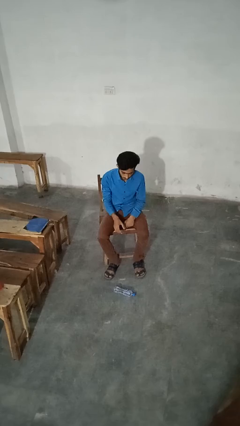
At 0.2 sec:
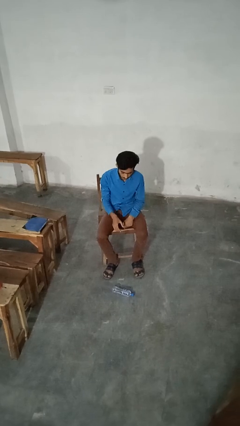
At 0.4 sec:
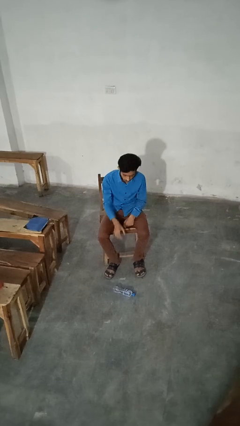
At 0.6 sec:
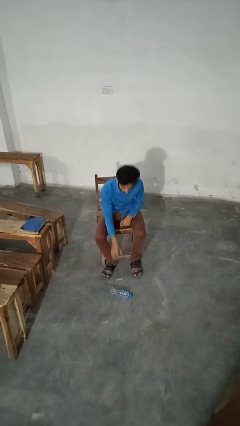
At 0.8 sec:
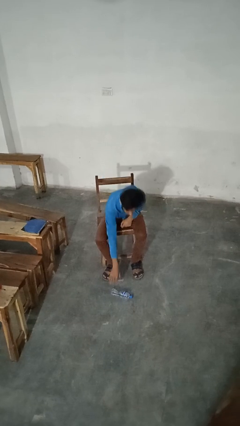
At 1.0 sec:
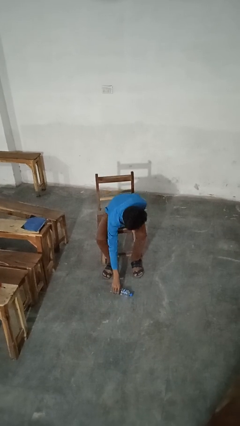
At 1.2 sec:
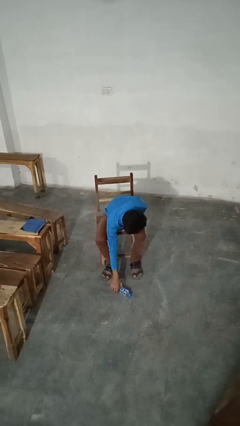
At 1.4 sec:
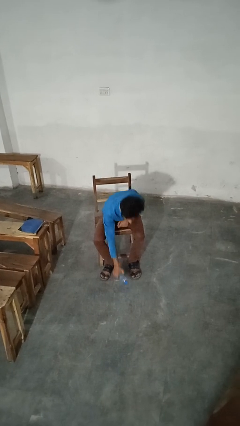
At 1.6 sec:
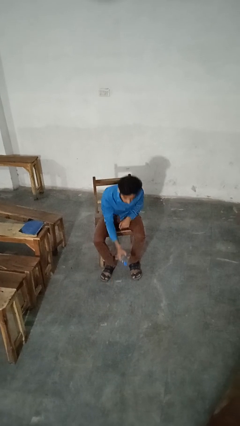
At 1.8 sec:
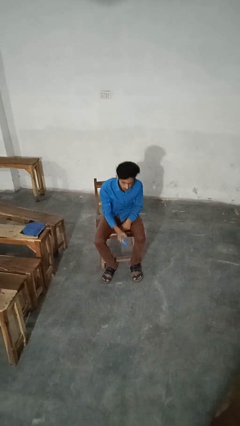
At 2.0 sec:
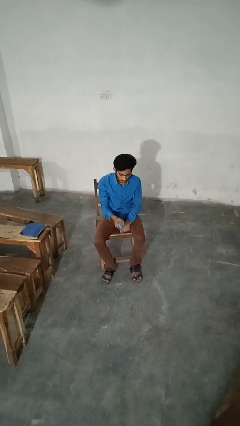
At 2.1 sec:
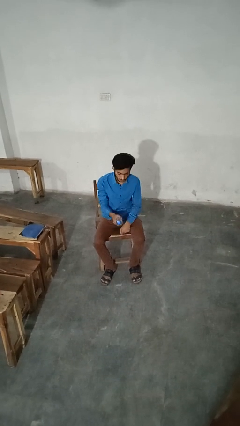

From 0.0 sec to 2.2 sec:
person picks up object from floor

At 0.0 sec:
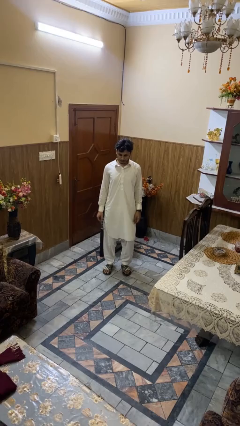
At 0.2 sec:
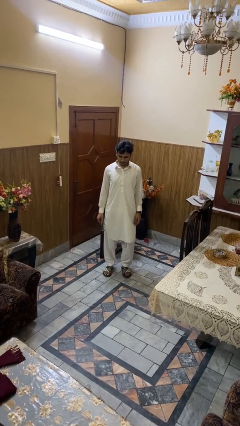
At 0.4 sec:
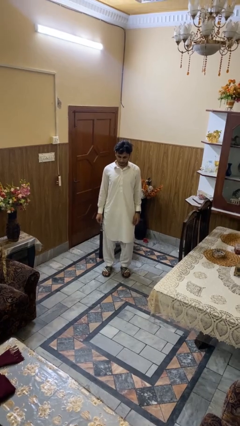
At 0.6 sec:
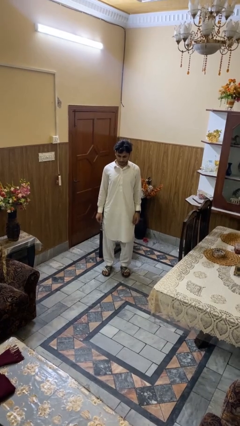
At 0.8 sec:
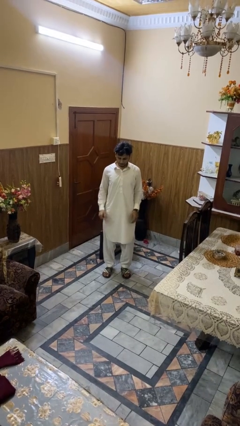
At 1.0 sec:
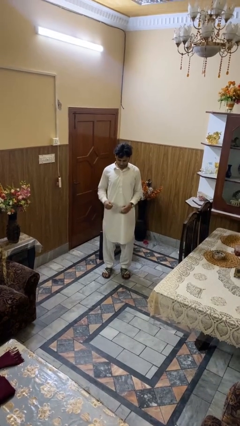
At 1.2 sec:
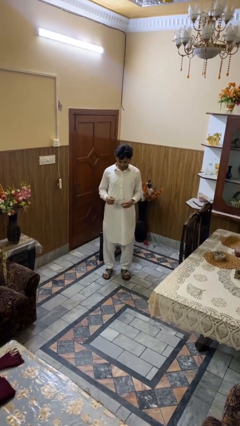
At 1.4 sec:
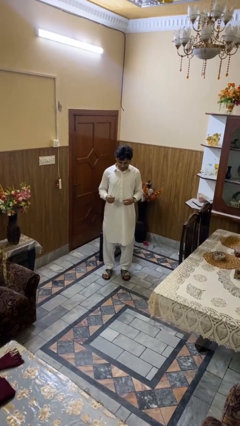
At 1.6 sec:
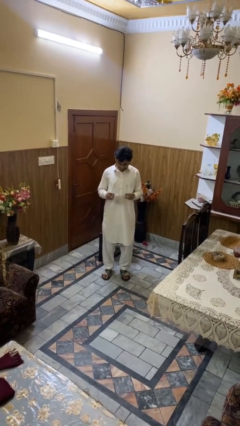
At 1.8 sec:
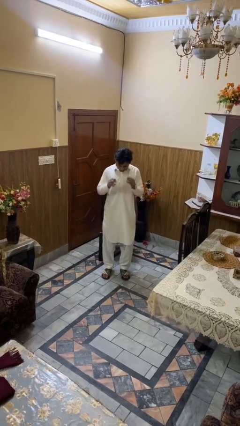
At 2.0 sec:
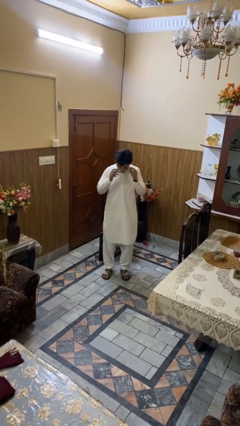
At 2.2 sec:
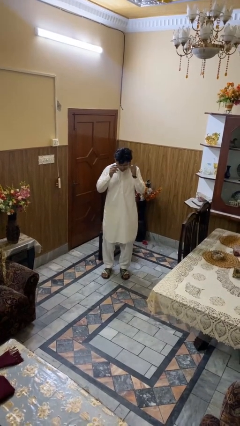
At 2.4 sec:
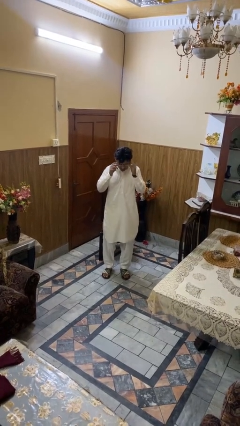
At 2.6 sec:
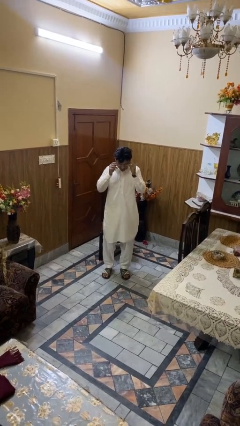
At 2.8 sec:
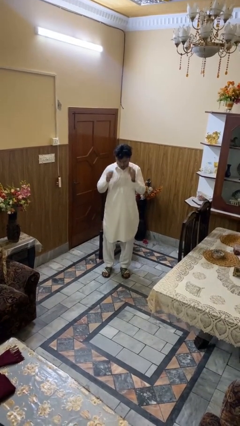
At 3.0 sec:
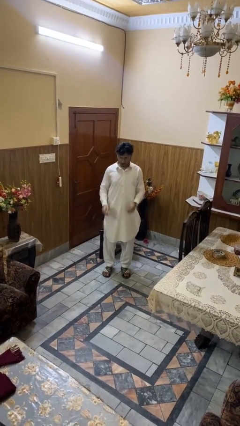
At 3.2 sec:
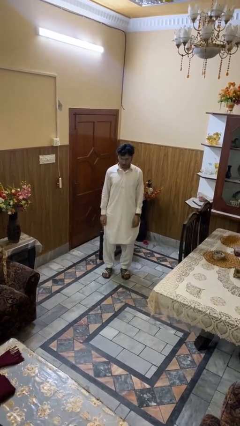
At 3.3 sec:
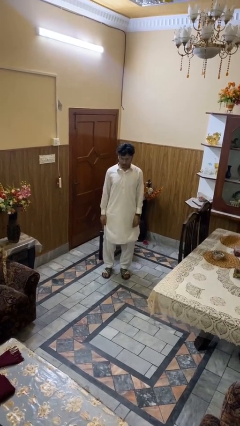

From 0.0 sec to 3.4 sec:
person puts on glasses

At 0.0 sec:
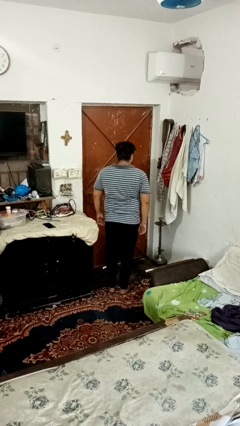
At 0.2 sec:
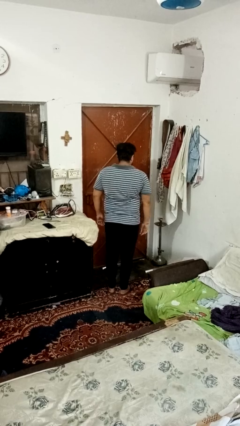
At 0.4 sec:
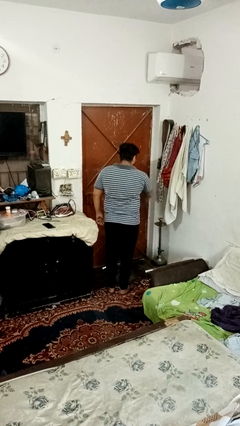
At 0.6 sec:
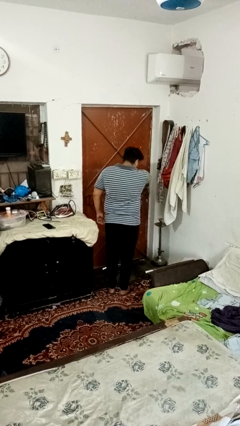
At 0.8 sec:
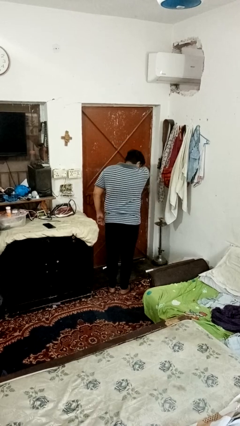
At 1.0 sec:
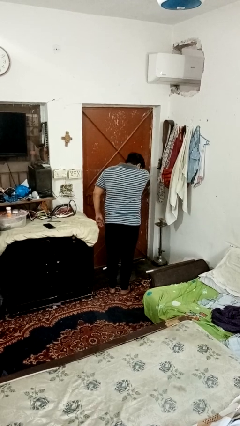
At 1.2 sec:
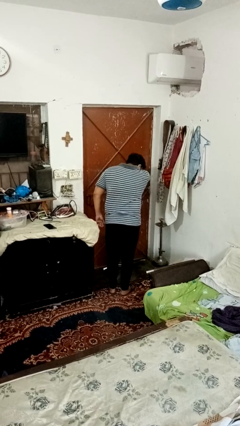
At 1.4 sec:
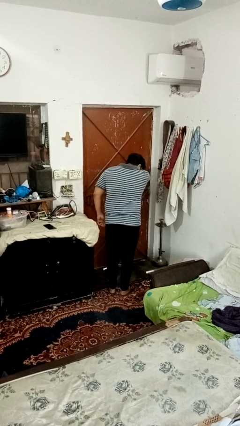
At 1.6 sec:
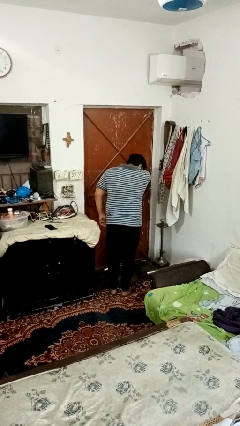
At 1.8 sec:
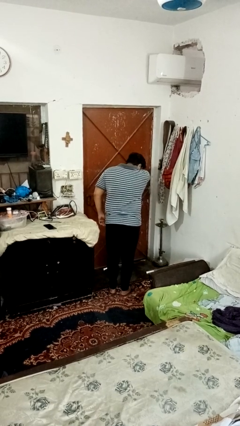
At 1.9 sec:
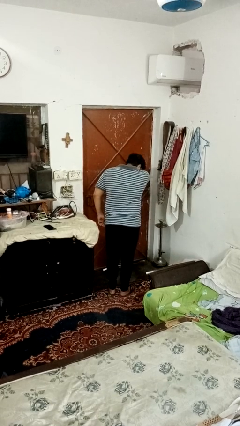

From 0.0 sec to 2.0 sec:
person sneezes into arm

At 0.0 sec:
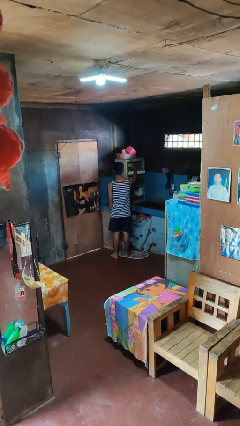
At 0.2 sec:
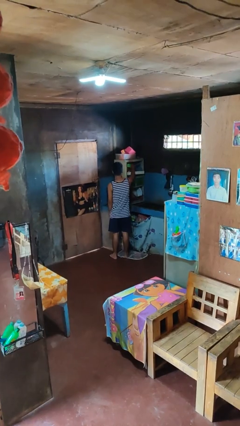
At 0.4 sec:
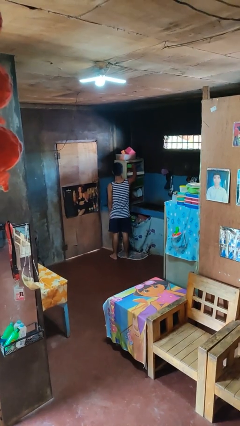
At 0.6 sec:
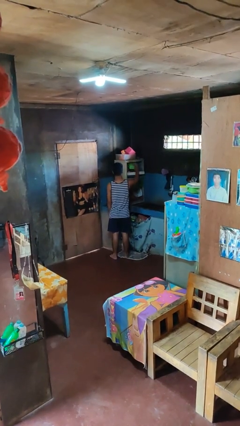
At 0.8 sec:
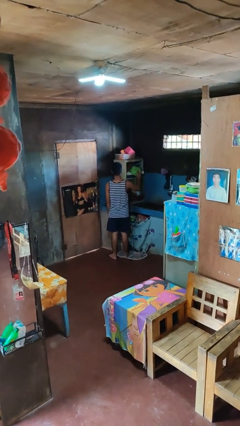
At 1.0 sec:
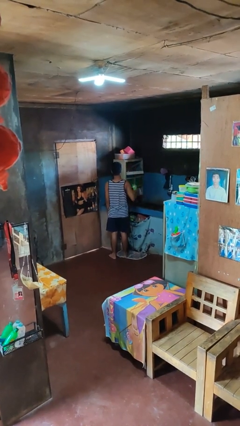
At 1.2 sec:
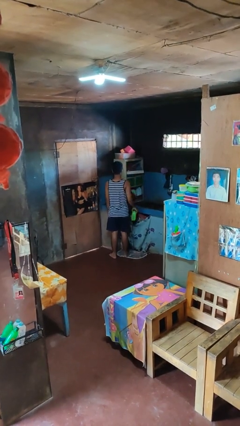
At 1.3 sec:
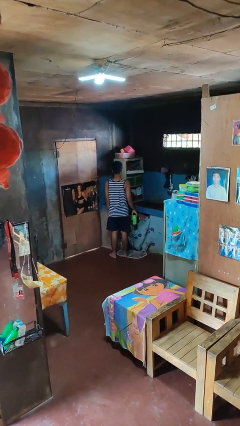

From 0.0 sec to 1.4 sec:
person takes object from cabinet

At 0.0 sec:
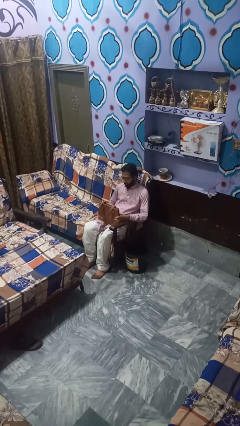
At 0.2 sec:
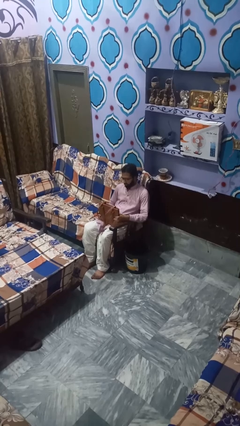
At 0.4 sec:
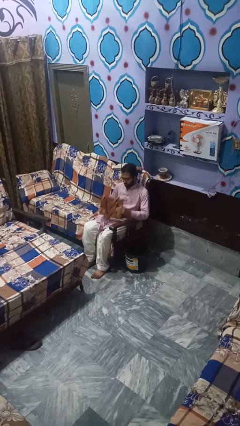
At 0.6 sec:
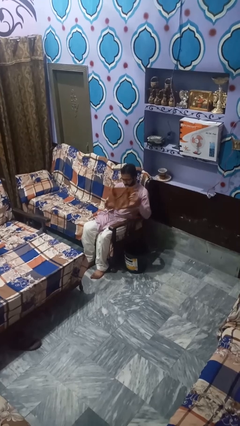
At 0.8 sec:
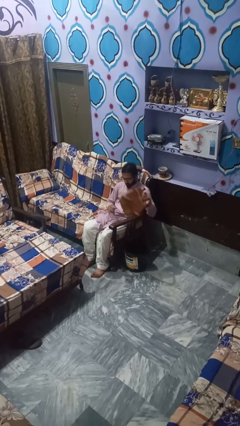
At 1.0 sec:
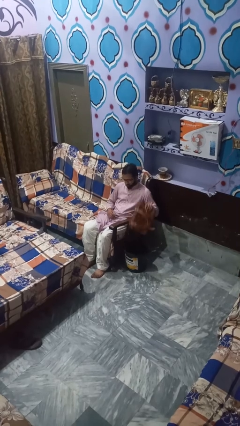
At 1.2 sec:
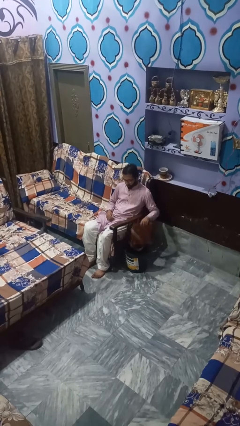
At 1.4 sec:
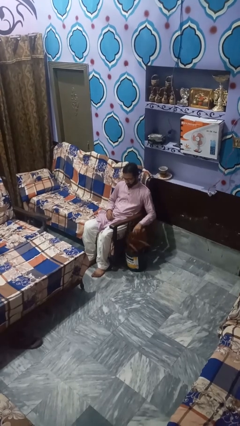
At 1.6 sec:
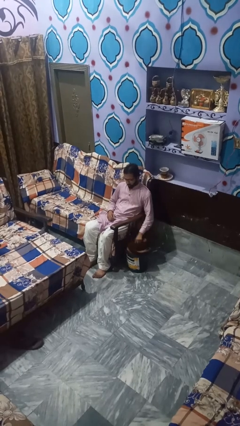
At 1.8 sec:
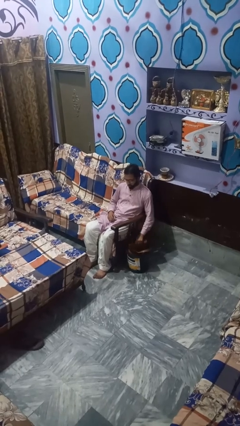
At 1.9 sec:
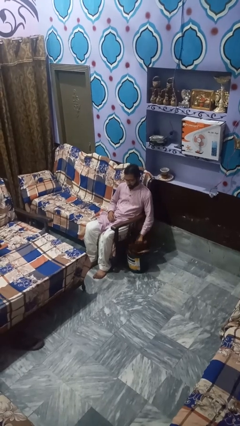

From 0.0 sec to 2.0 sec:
person puts object into basket

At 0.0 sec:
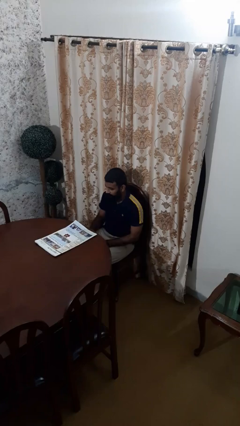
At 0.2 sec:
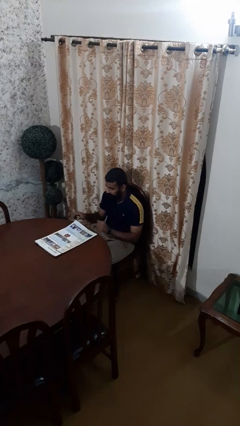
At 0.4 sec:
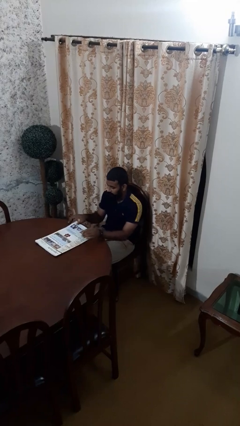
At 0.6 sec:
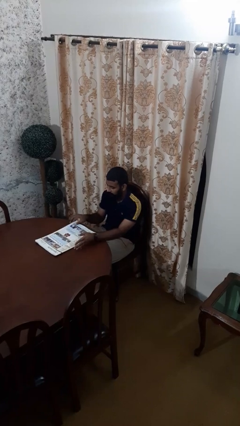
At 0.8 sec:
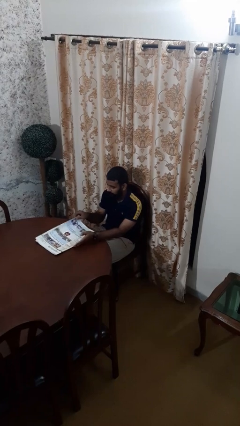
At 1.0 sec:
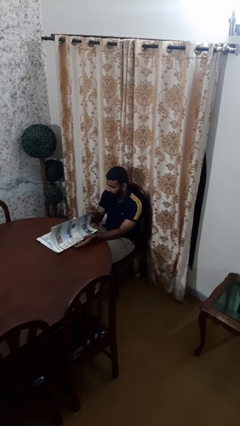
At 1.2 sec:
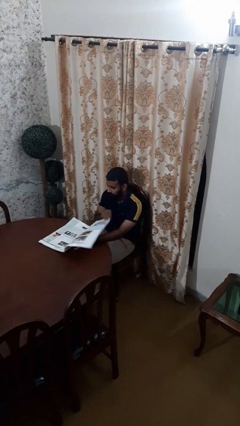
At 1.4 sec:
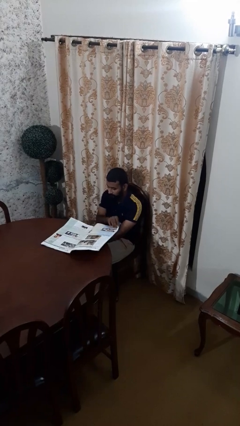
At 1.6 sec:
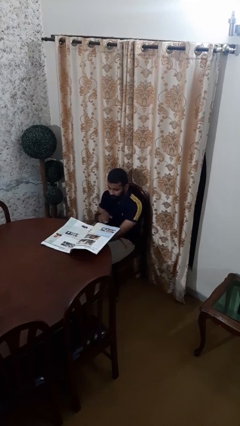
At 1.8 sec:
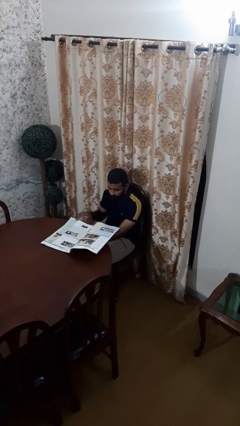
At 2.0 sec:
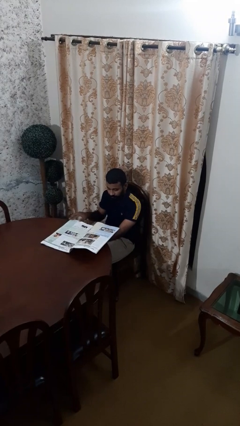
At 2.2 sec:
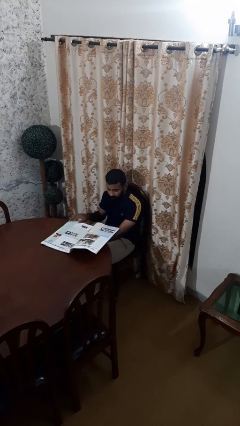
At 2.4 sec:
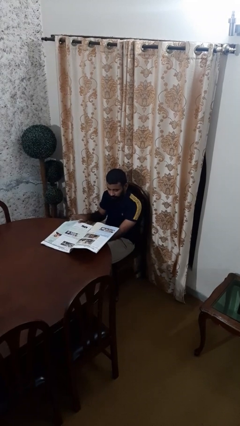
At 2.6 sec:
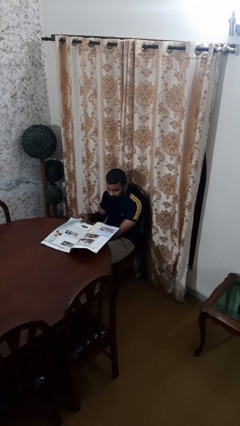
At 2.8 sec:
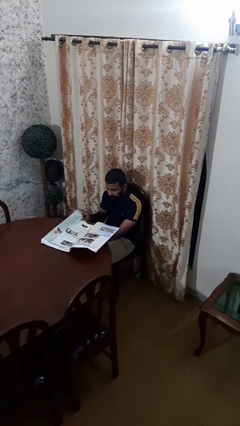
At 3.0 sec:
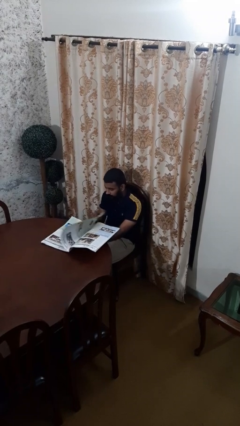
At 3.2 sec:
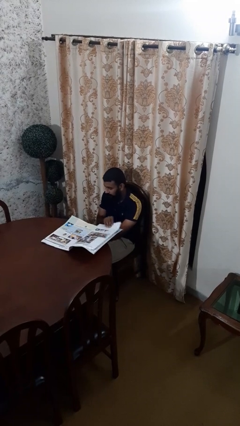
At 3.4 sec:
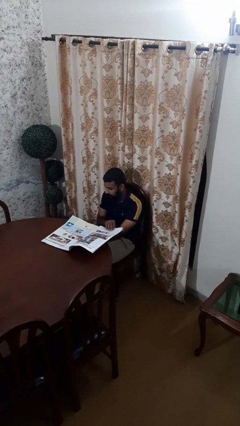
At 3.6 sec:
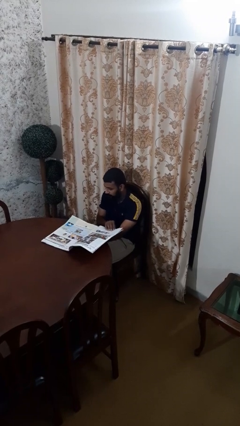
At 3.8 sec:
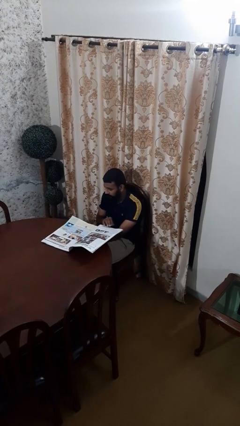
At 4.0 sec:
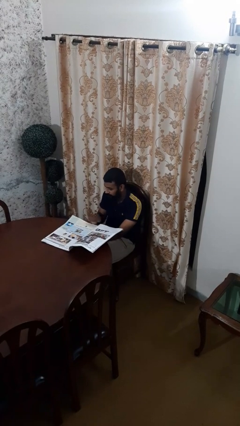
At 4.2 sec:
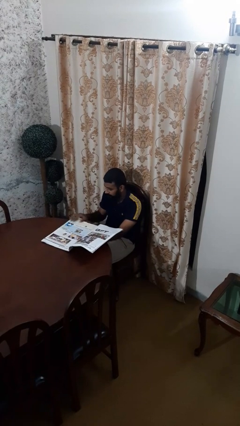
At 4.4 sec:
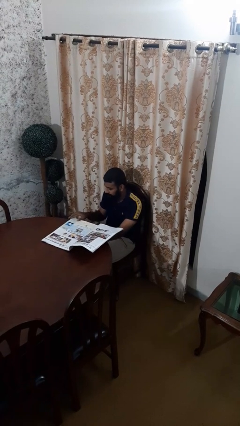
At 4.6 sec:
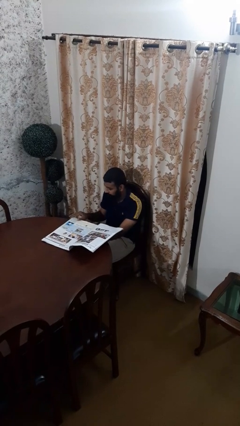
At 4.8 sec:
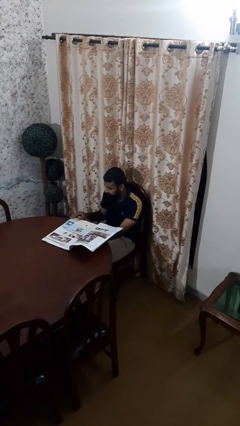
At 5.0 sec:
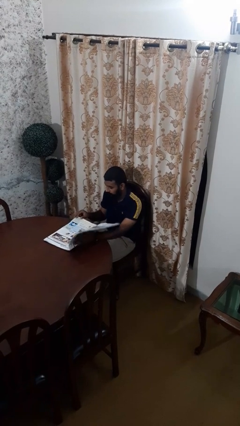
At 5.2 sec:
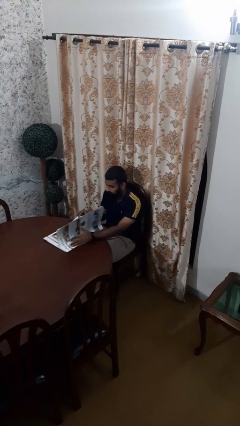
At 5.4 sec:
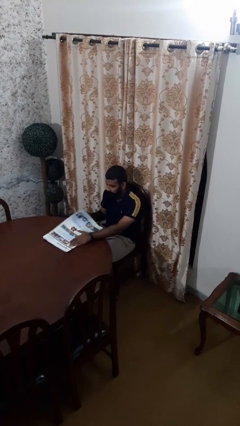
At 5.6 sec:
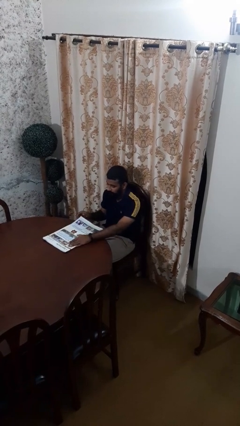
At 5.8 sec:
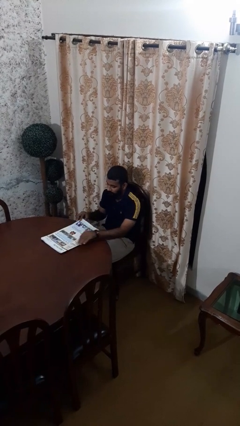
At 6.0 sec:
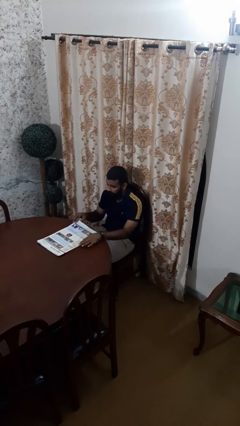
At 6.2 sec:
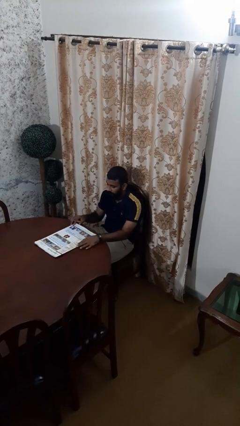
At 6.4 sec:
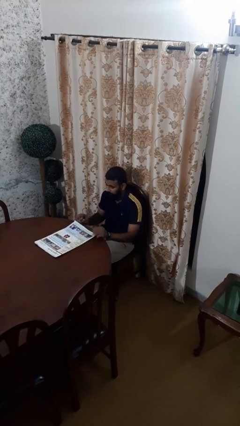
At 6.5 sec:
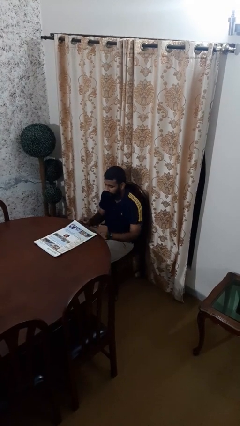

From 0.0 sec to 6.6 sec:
person reads magazine
